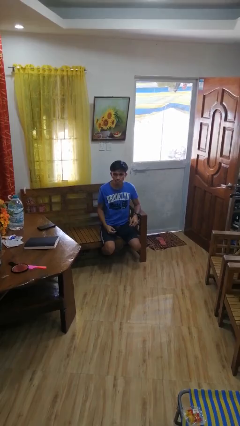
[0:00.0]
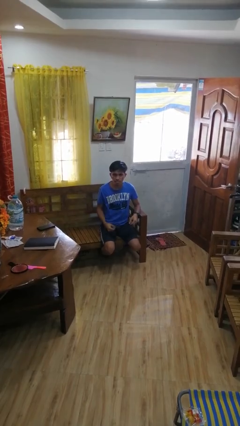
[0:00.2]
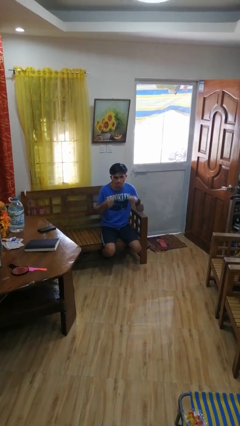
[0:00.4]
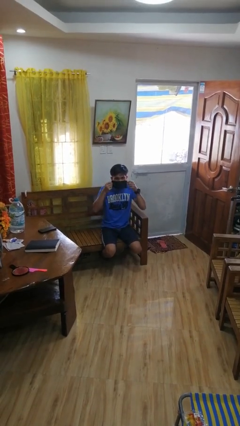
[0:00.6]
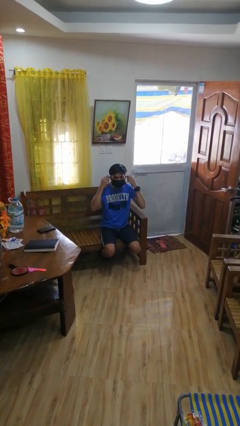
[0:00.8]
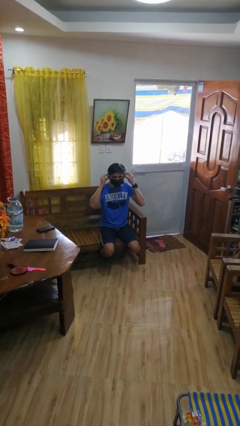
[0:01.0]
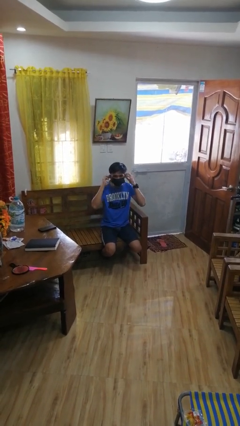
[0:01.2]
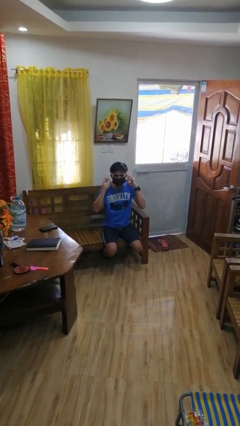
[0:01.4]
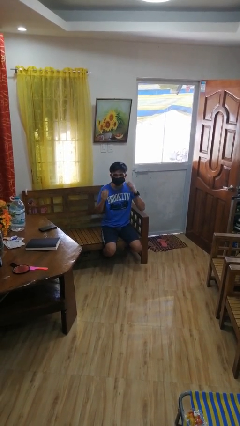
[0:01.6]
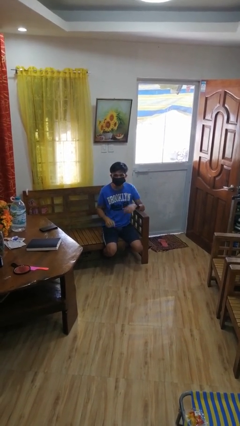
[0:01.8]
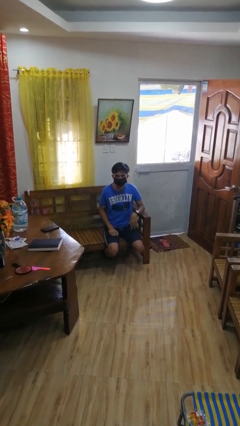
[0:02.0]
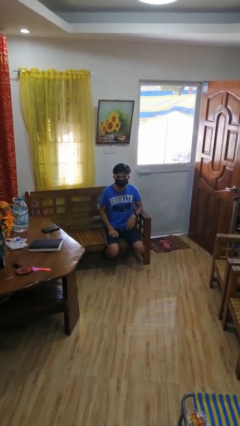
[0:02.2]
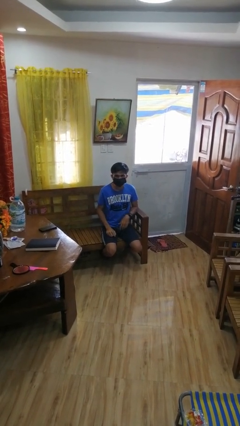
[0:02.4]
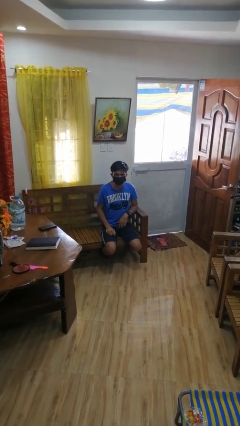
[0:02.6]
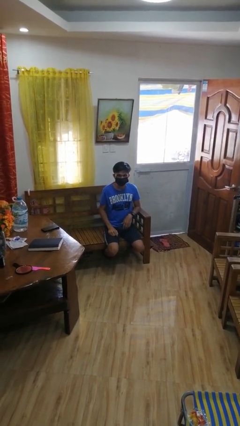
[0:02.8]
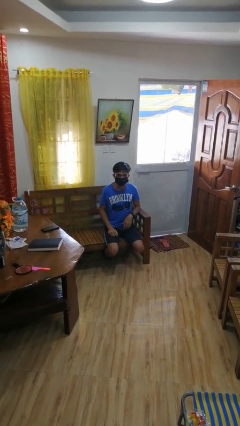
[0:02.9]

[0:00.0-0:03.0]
person puts on facemask

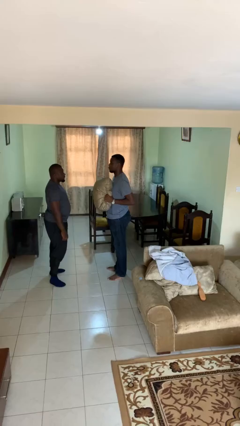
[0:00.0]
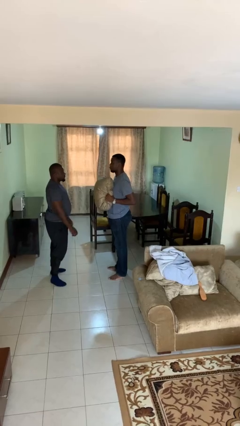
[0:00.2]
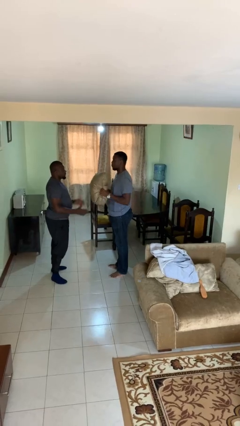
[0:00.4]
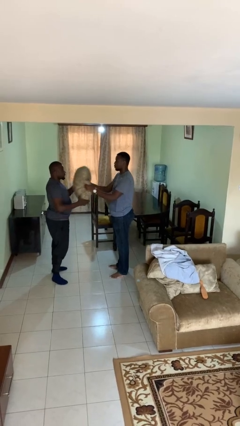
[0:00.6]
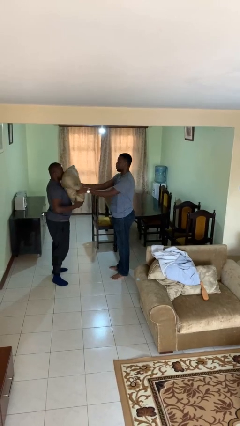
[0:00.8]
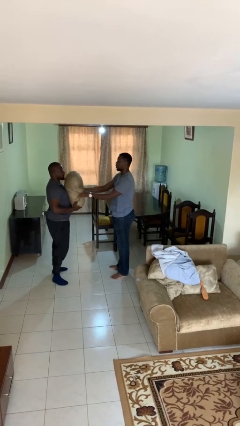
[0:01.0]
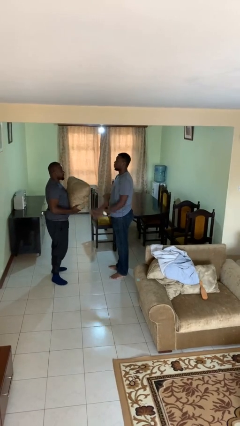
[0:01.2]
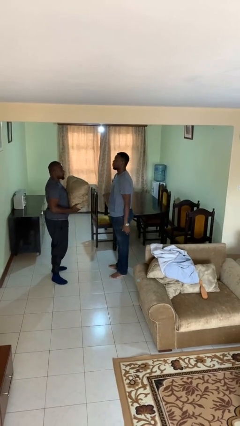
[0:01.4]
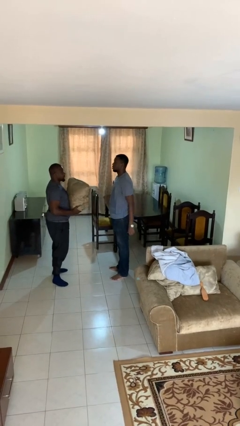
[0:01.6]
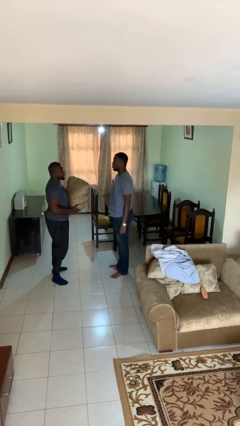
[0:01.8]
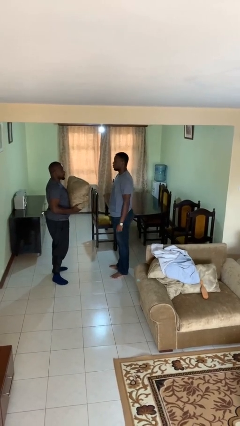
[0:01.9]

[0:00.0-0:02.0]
person transfers object to person

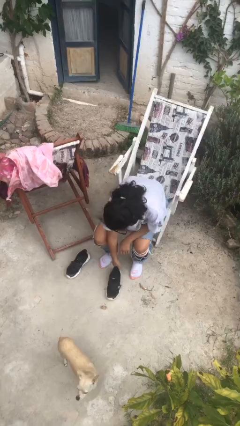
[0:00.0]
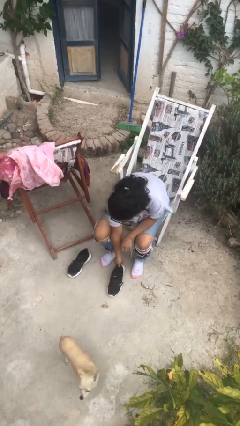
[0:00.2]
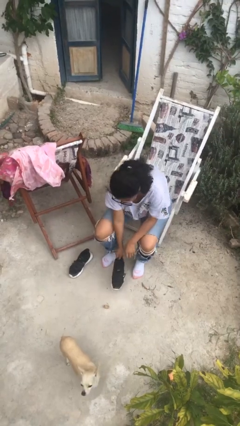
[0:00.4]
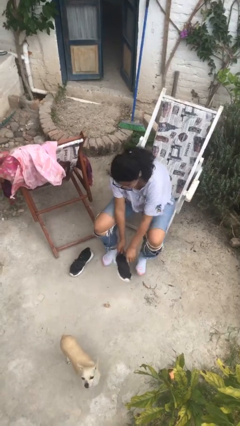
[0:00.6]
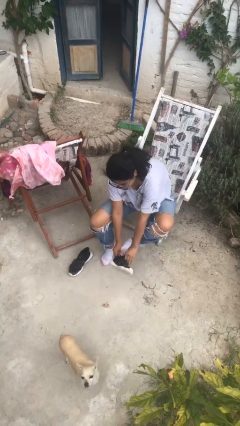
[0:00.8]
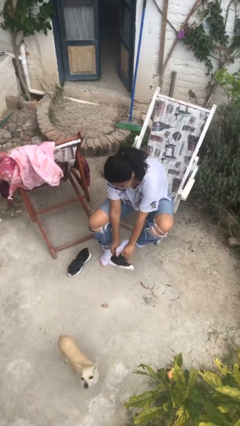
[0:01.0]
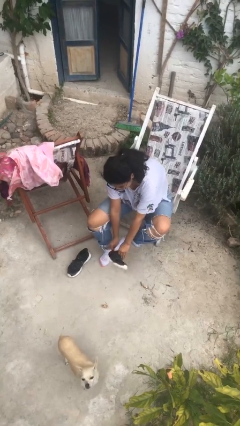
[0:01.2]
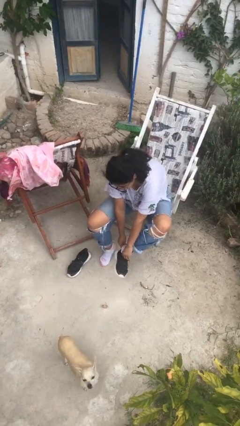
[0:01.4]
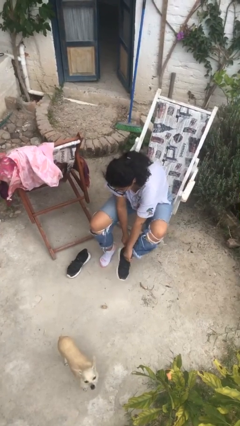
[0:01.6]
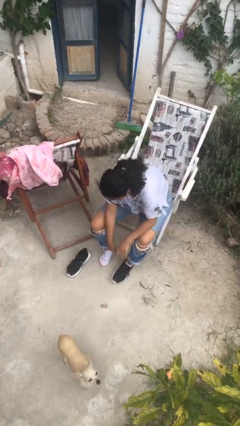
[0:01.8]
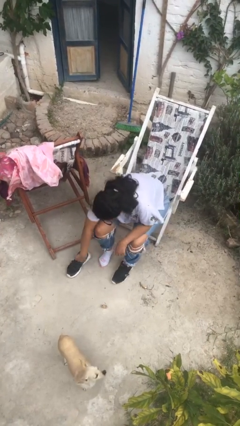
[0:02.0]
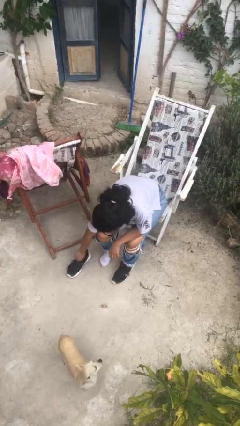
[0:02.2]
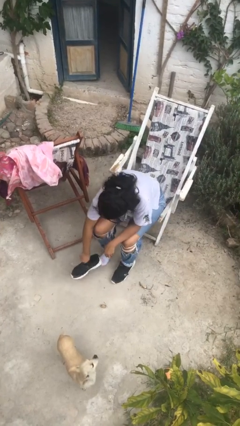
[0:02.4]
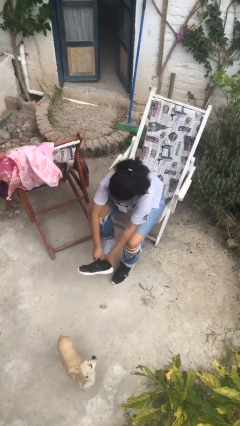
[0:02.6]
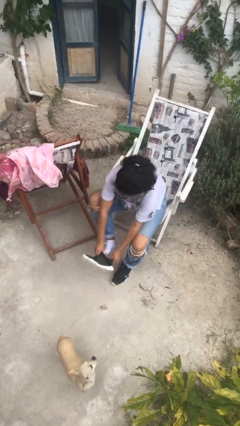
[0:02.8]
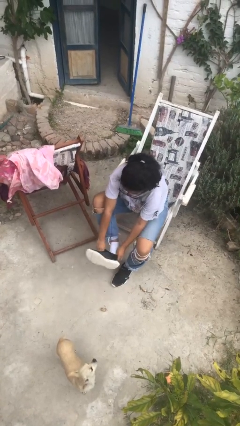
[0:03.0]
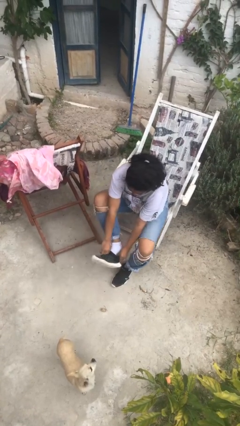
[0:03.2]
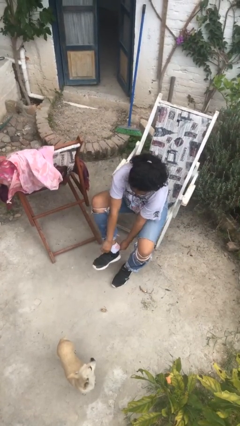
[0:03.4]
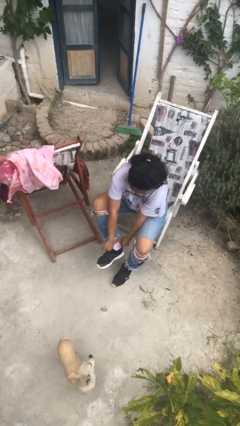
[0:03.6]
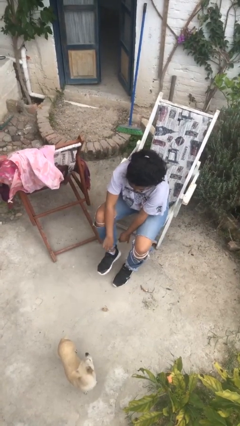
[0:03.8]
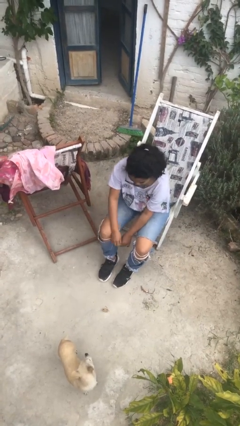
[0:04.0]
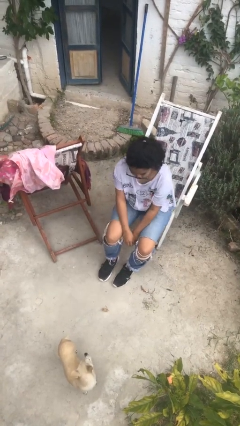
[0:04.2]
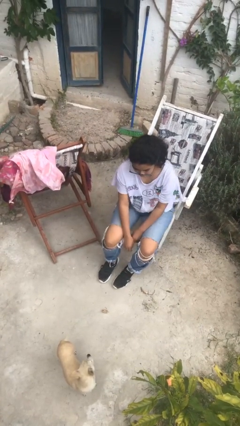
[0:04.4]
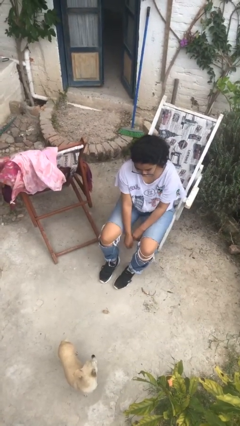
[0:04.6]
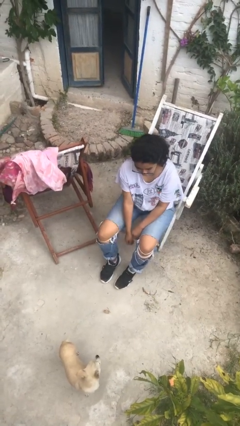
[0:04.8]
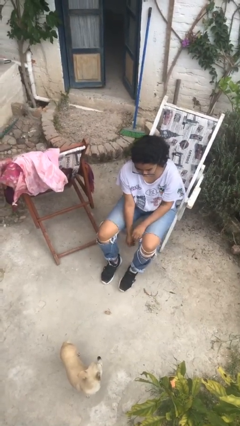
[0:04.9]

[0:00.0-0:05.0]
person puts on shoes

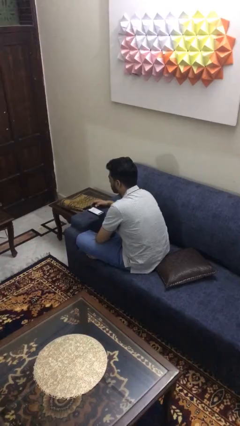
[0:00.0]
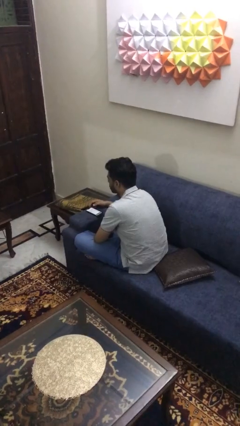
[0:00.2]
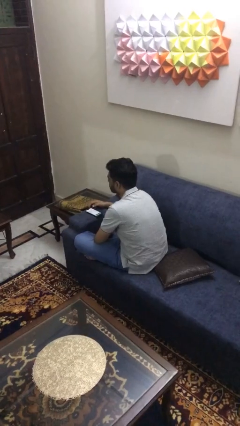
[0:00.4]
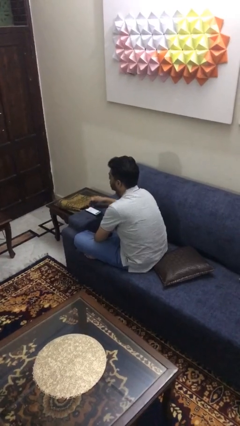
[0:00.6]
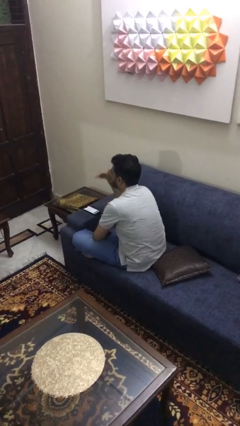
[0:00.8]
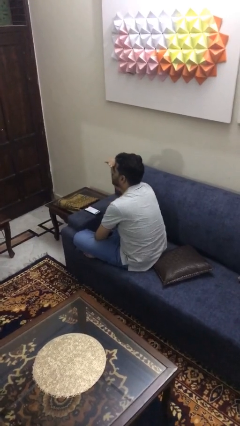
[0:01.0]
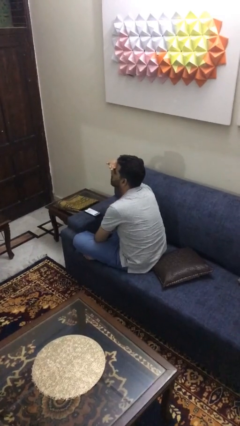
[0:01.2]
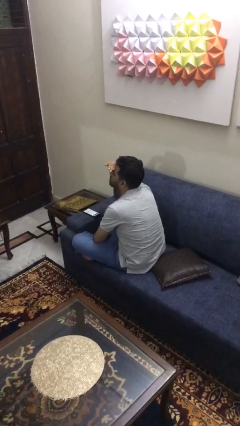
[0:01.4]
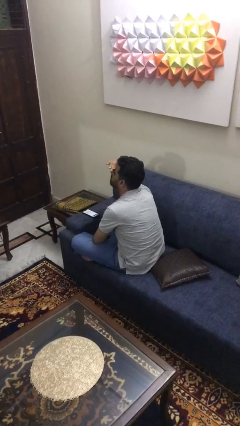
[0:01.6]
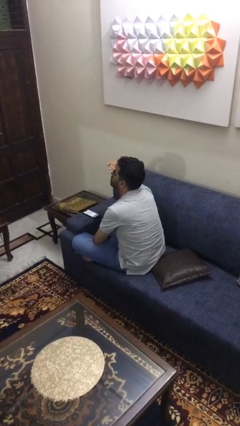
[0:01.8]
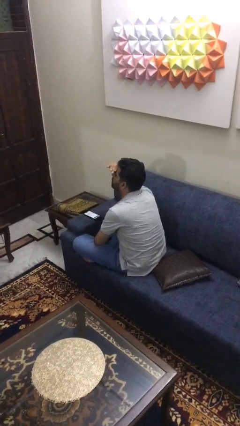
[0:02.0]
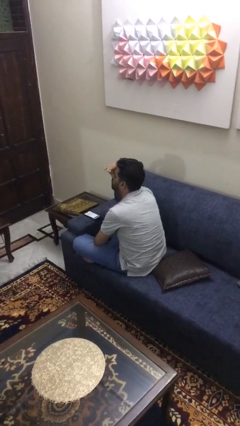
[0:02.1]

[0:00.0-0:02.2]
person shades eyes

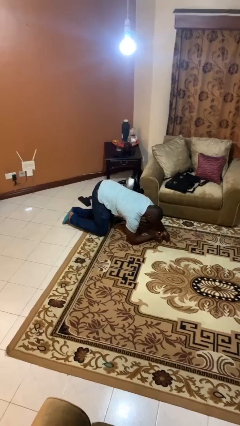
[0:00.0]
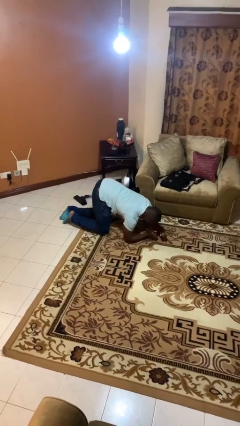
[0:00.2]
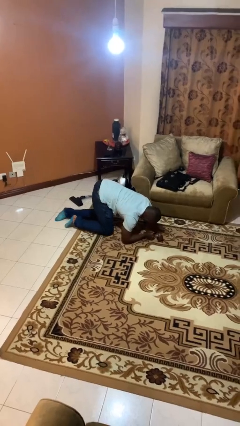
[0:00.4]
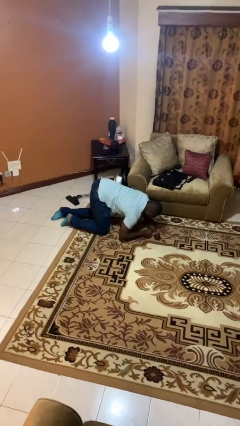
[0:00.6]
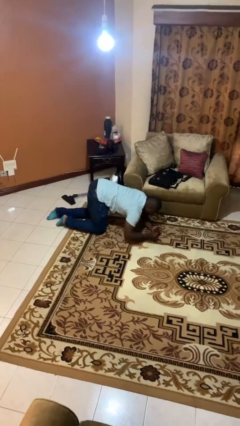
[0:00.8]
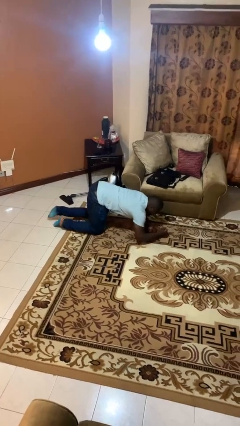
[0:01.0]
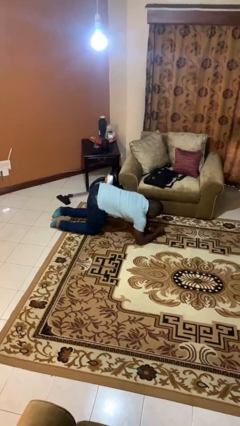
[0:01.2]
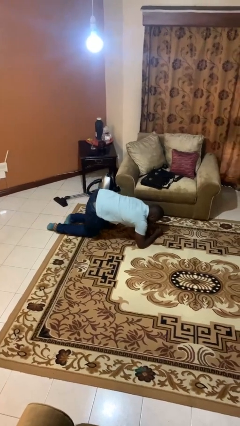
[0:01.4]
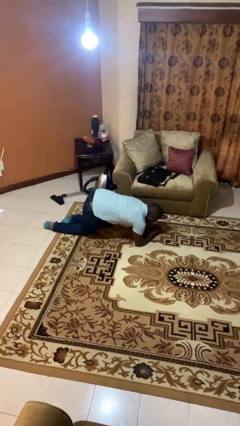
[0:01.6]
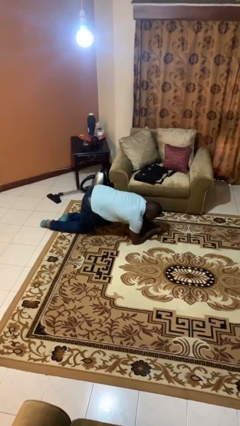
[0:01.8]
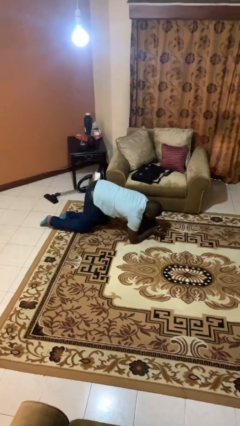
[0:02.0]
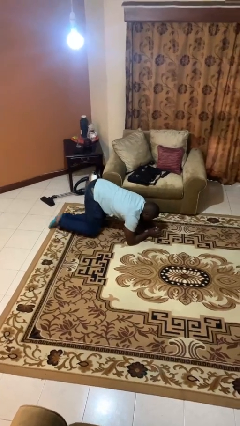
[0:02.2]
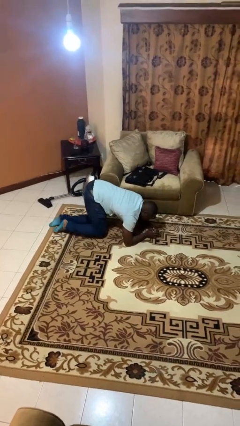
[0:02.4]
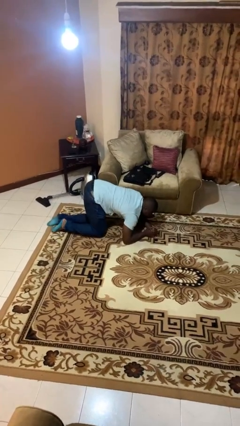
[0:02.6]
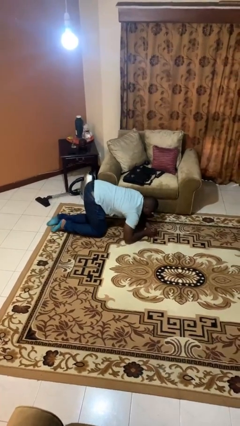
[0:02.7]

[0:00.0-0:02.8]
person crawls

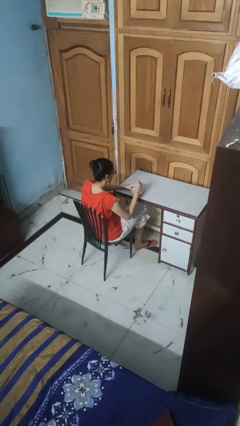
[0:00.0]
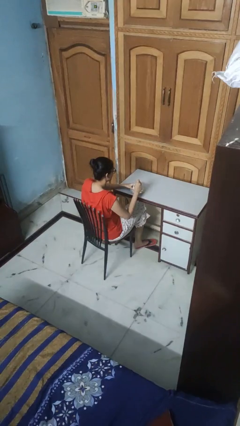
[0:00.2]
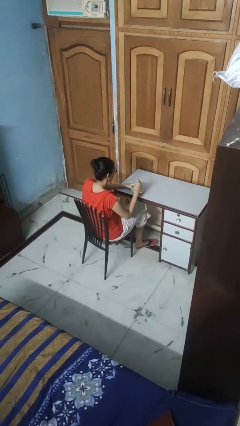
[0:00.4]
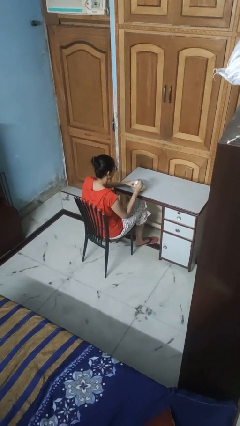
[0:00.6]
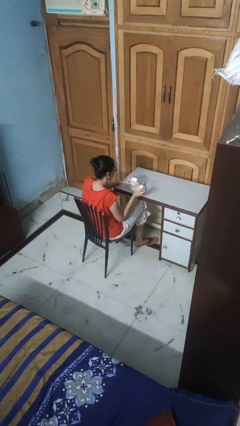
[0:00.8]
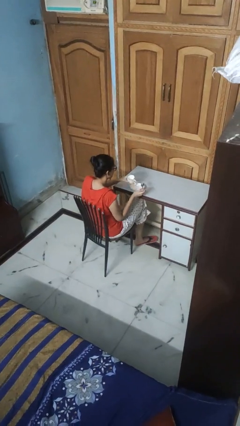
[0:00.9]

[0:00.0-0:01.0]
person stirs mug

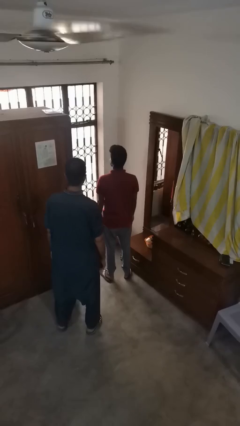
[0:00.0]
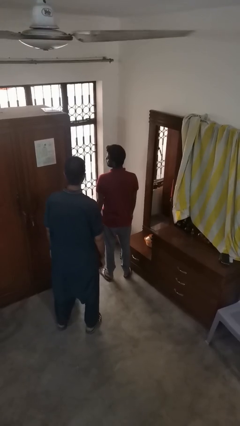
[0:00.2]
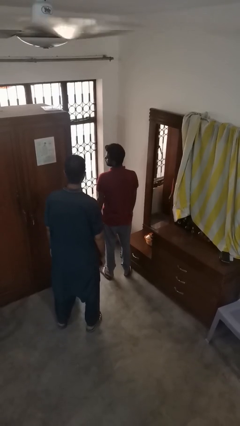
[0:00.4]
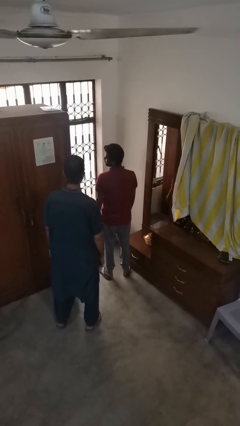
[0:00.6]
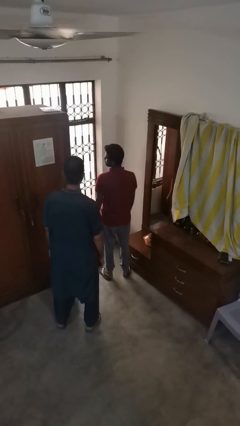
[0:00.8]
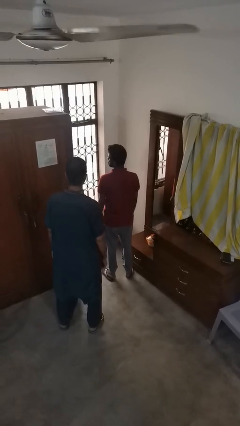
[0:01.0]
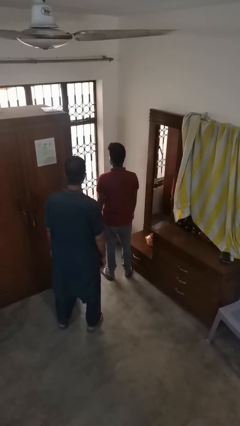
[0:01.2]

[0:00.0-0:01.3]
person looks over shoulder
